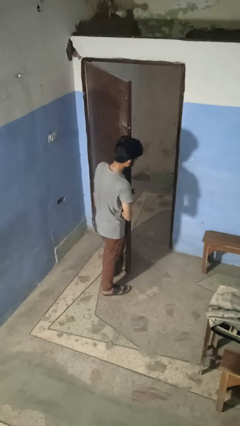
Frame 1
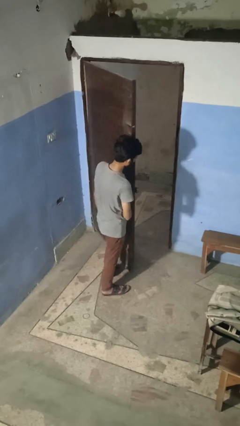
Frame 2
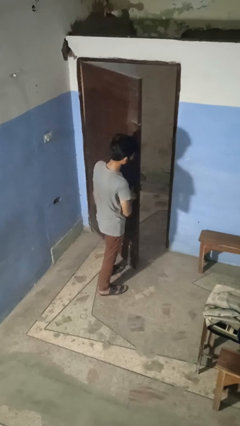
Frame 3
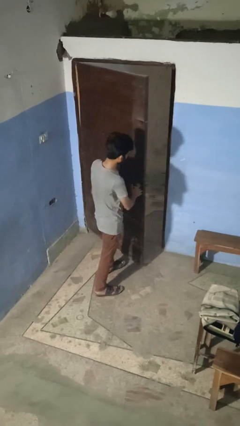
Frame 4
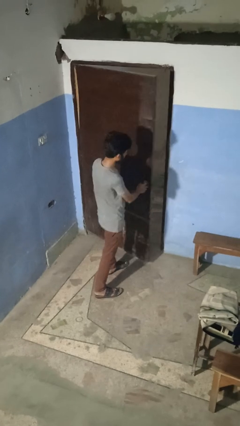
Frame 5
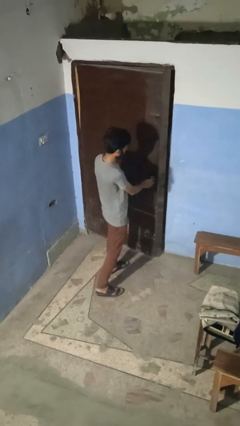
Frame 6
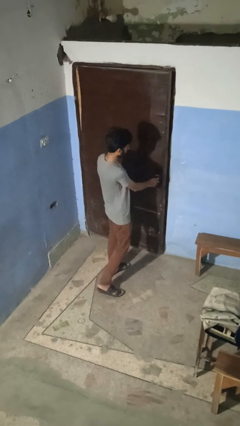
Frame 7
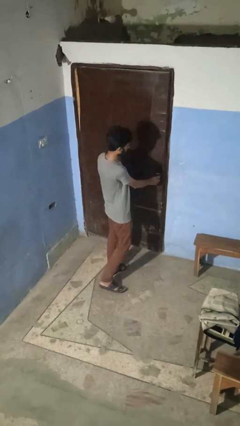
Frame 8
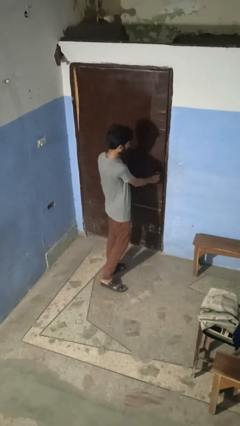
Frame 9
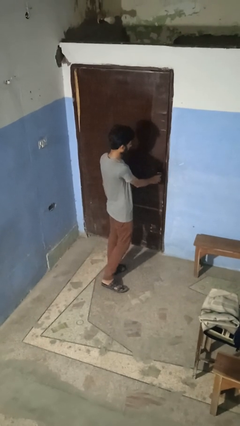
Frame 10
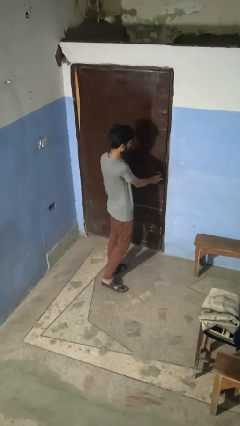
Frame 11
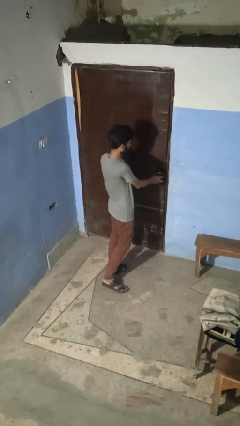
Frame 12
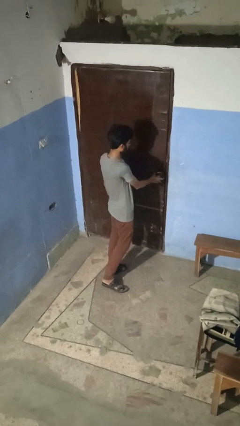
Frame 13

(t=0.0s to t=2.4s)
person closes facility door

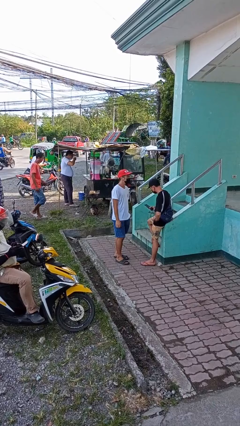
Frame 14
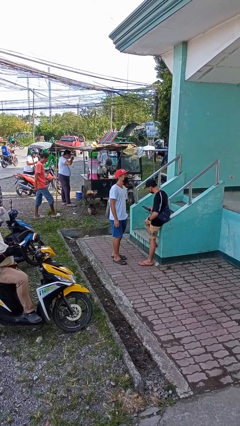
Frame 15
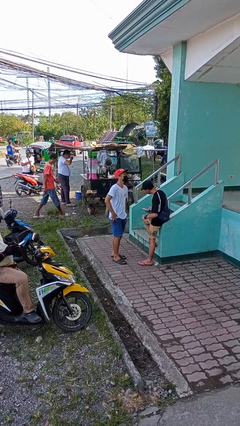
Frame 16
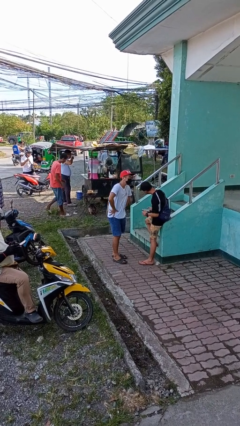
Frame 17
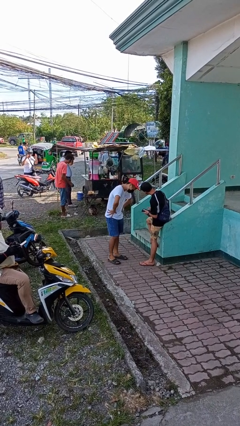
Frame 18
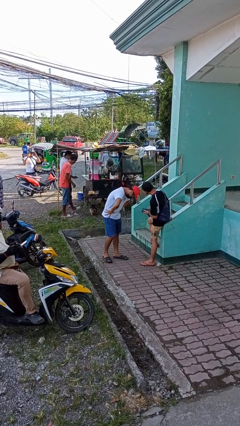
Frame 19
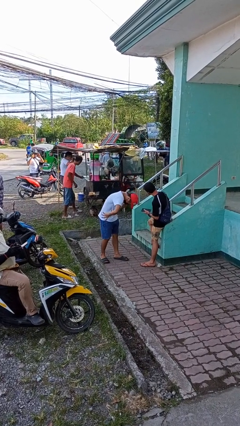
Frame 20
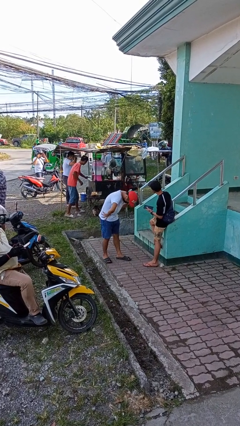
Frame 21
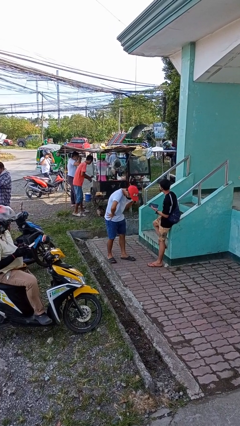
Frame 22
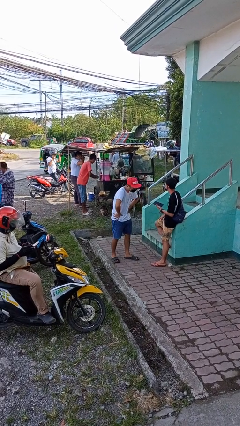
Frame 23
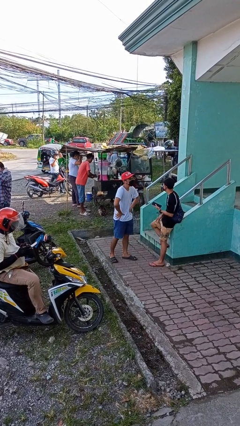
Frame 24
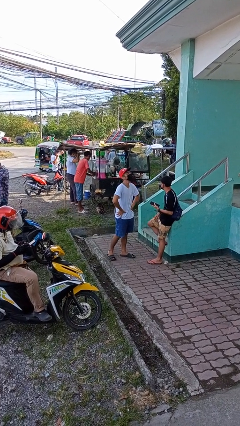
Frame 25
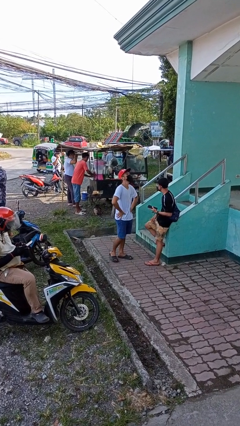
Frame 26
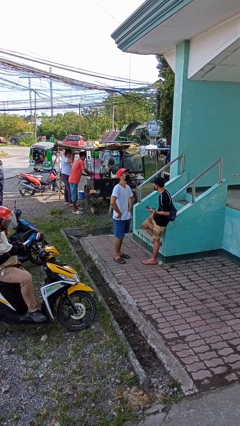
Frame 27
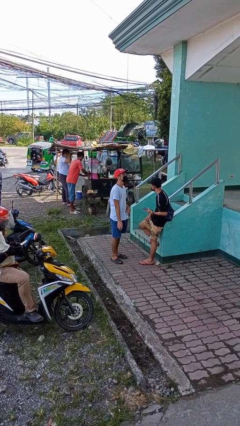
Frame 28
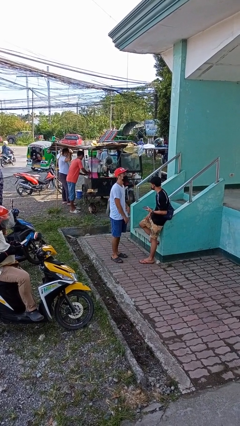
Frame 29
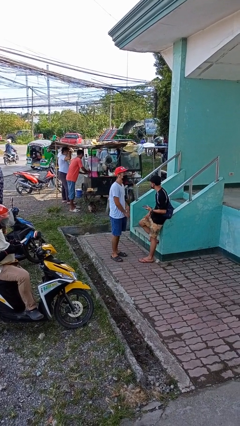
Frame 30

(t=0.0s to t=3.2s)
person laughs with person

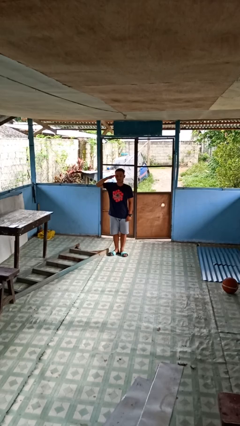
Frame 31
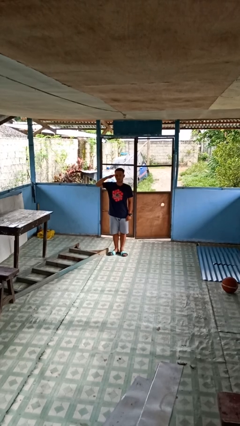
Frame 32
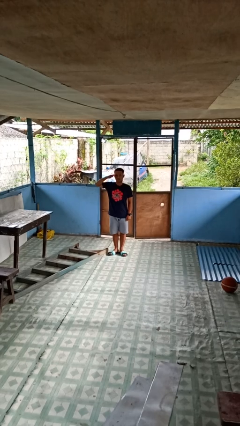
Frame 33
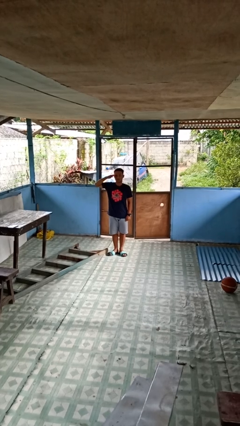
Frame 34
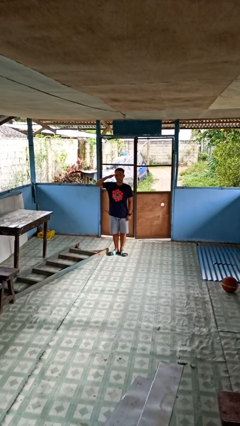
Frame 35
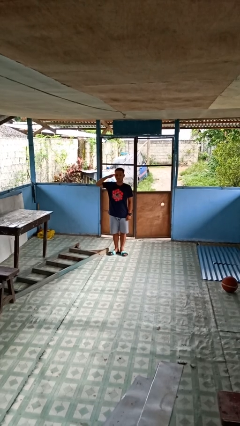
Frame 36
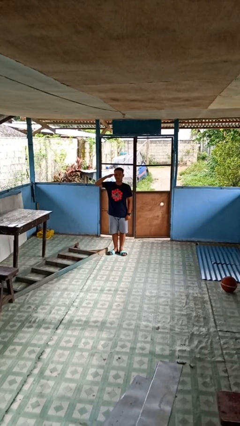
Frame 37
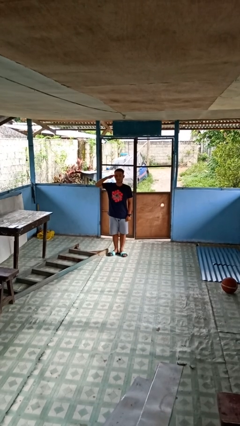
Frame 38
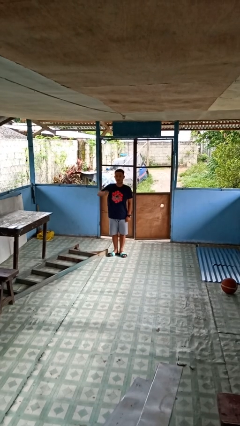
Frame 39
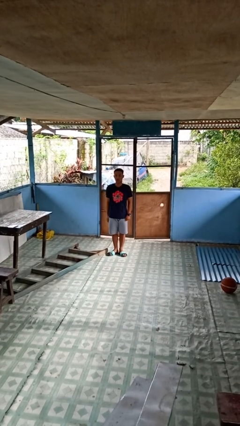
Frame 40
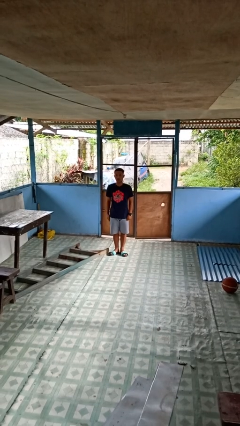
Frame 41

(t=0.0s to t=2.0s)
person salutes

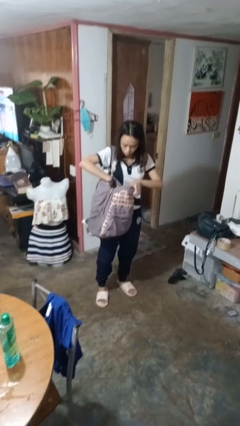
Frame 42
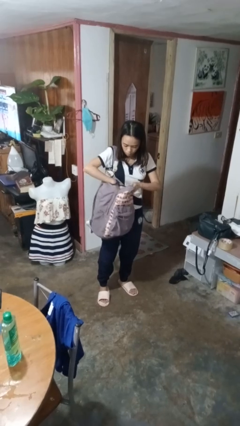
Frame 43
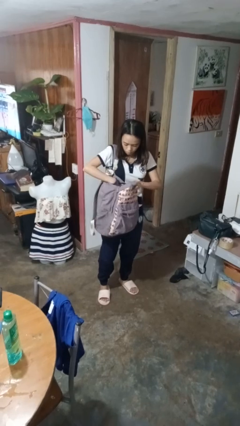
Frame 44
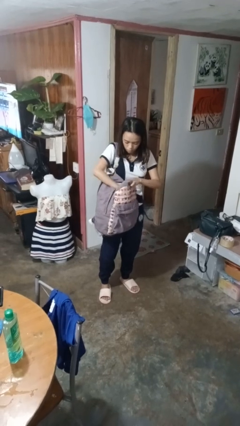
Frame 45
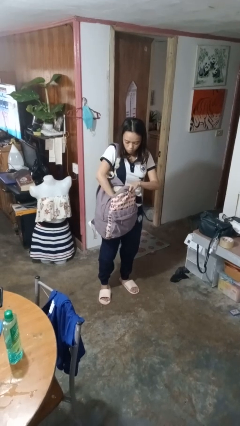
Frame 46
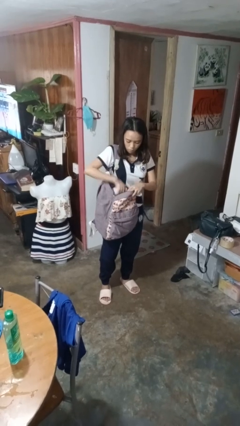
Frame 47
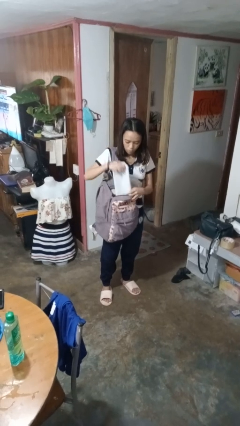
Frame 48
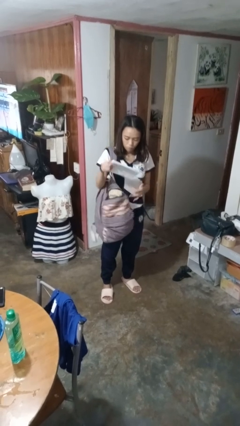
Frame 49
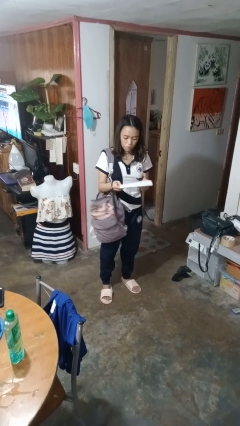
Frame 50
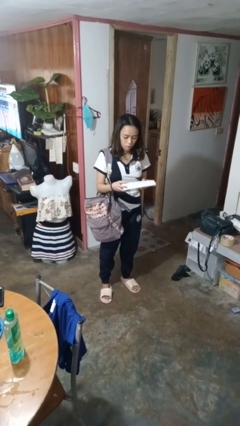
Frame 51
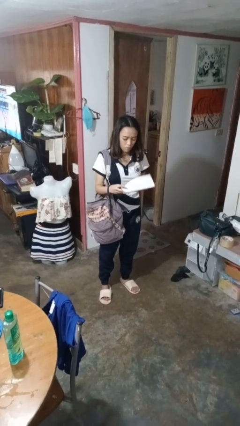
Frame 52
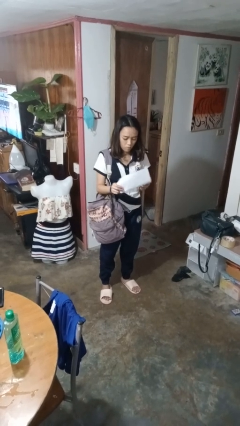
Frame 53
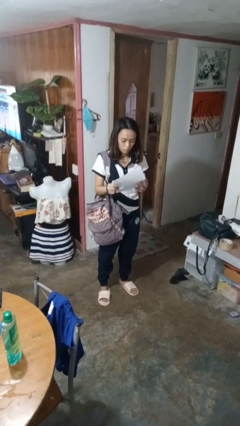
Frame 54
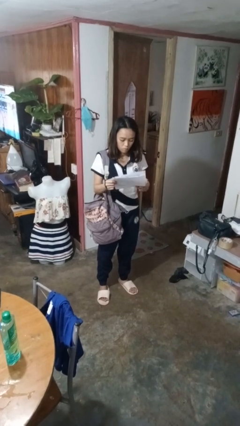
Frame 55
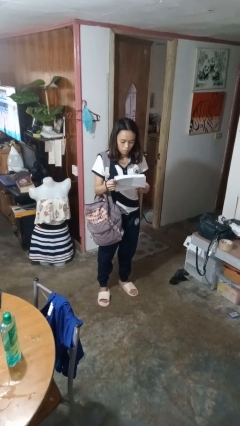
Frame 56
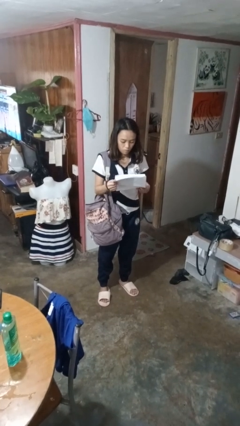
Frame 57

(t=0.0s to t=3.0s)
person takes object from backpack

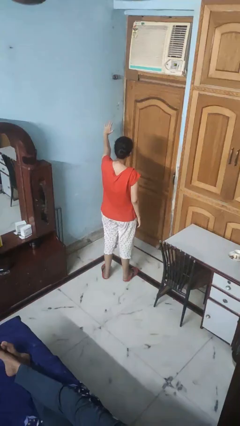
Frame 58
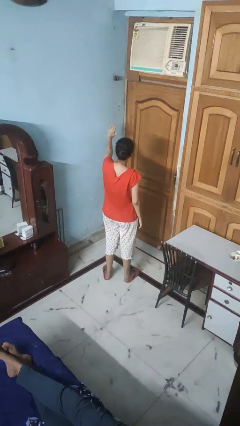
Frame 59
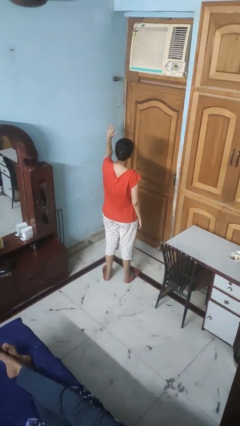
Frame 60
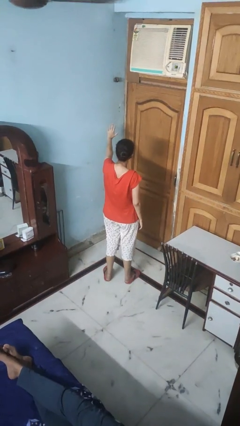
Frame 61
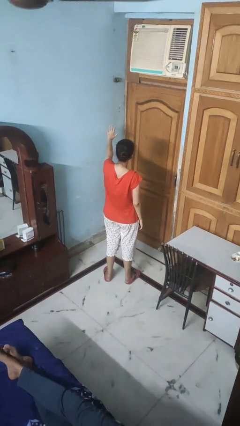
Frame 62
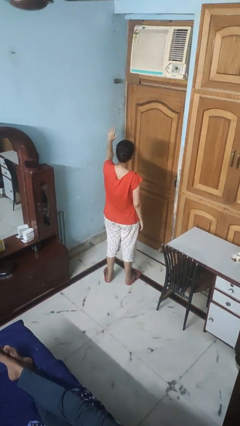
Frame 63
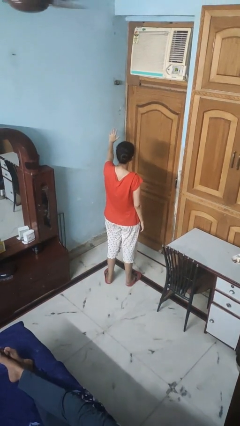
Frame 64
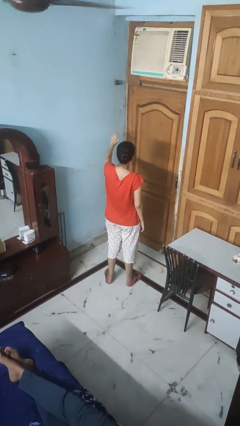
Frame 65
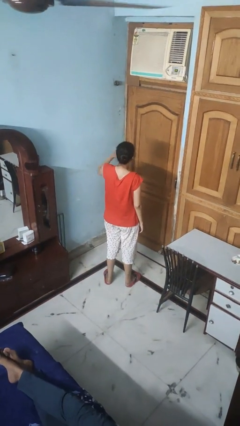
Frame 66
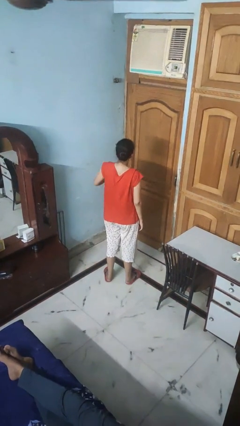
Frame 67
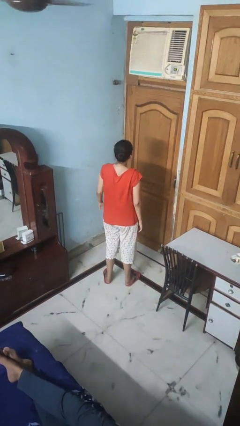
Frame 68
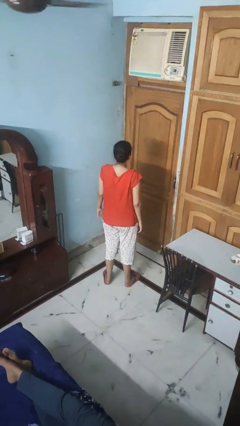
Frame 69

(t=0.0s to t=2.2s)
person gestures number five

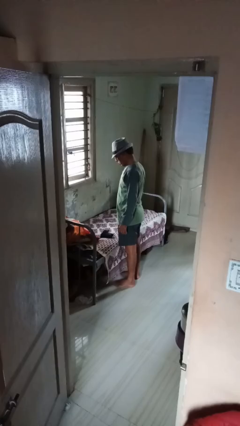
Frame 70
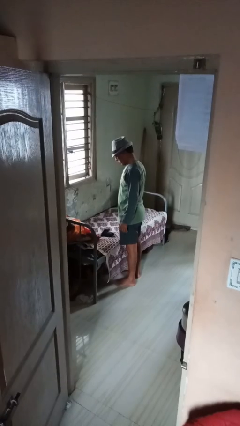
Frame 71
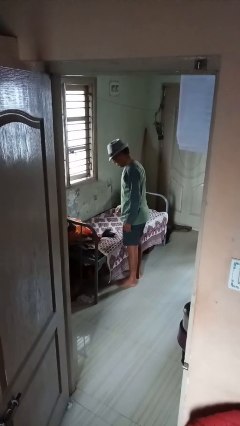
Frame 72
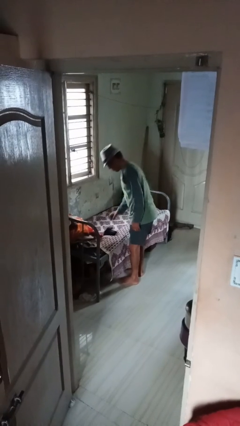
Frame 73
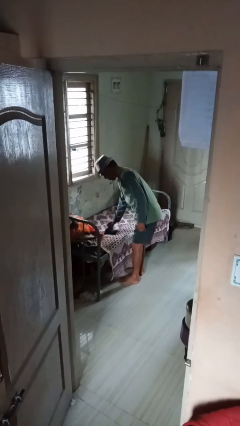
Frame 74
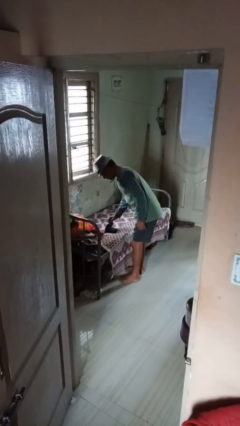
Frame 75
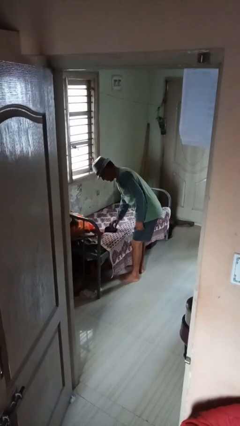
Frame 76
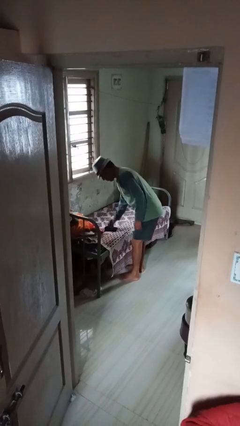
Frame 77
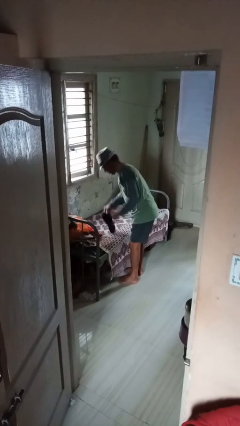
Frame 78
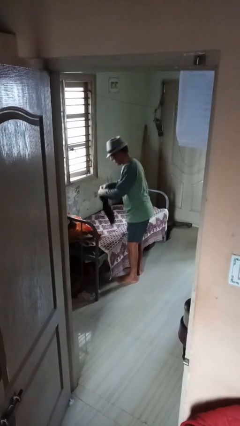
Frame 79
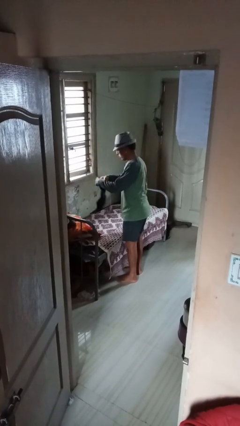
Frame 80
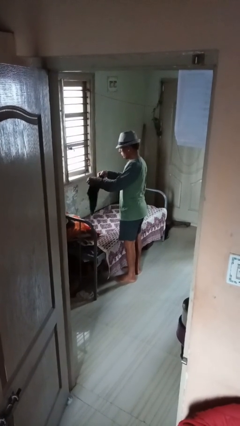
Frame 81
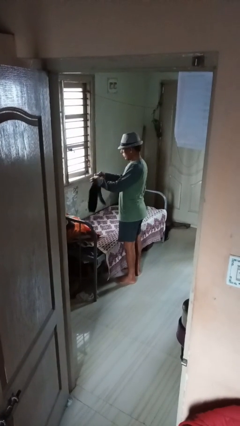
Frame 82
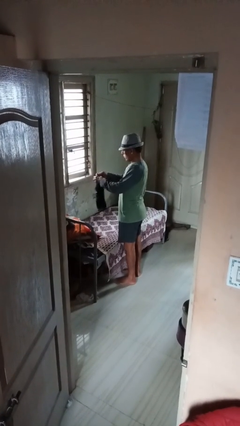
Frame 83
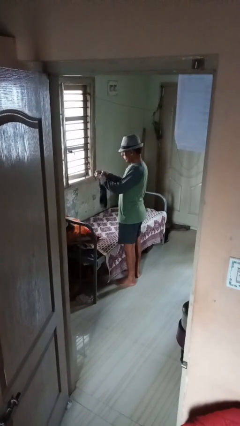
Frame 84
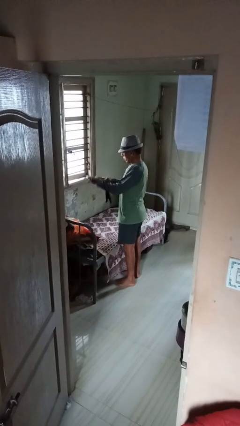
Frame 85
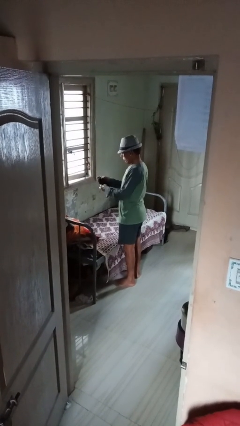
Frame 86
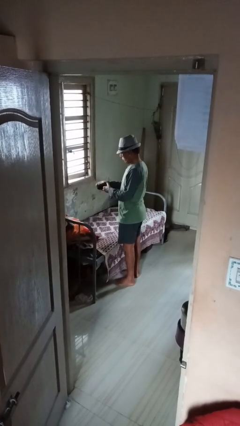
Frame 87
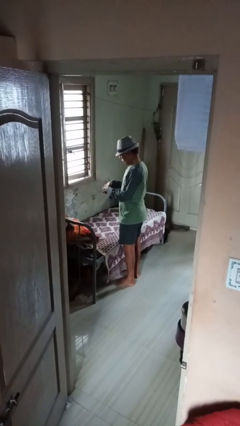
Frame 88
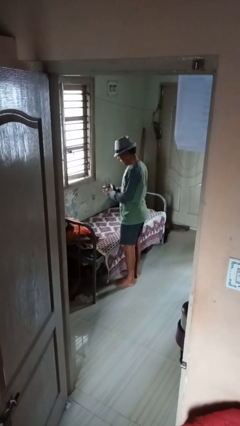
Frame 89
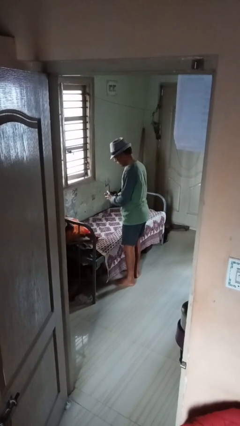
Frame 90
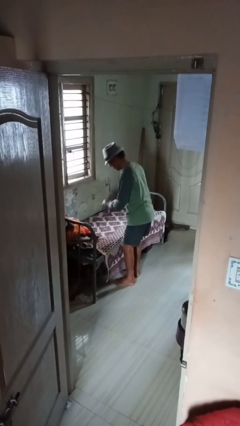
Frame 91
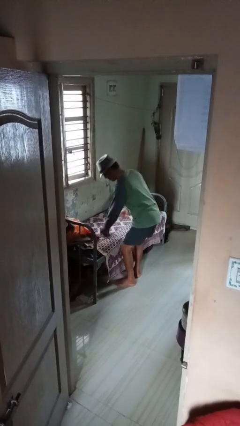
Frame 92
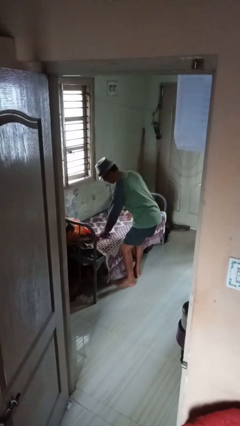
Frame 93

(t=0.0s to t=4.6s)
person folds socks

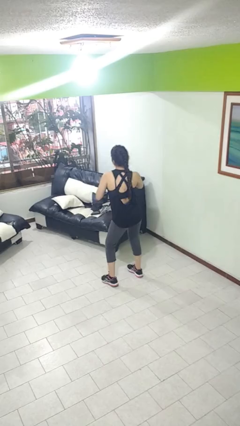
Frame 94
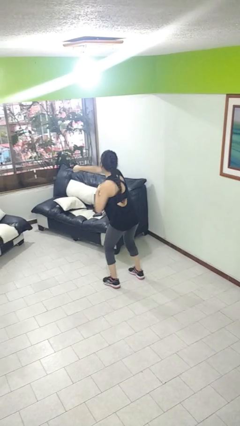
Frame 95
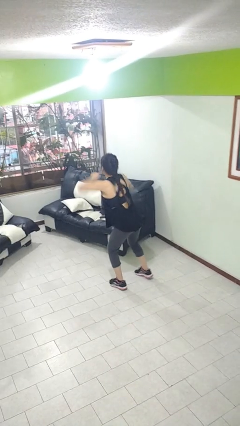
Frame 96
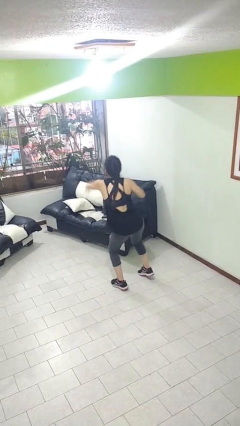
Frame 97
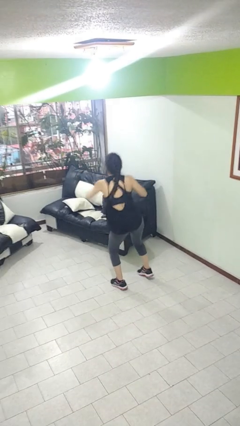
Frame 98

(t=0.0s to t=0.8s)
person punches
